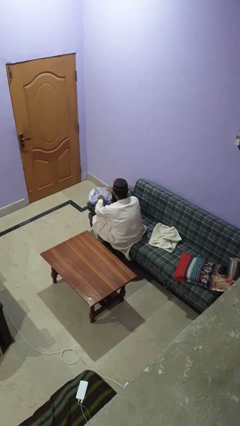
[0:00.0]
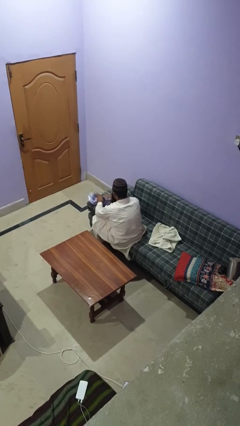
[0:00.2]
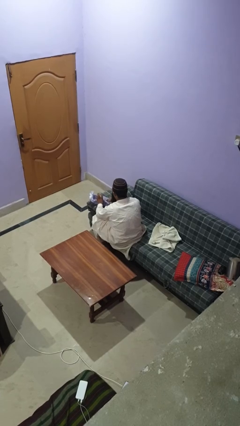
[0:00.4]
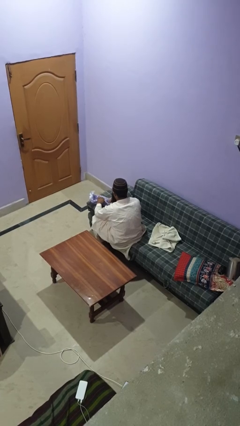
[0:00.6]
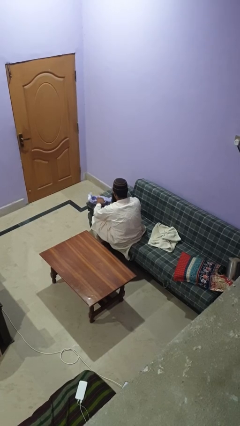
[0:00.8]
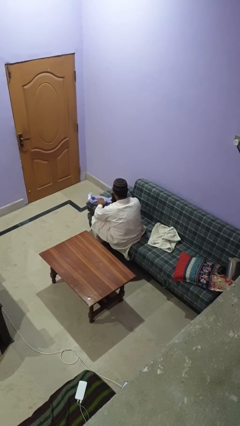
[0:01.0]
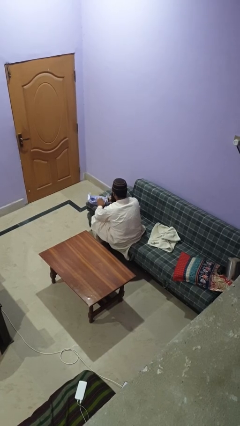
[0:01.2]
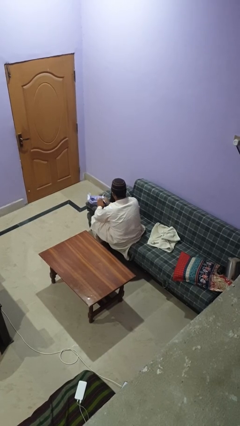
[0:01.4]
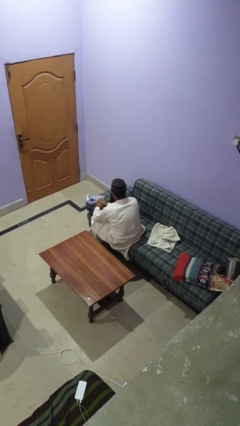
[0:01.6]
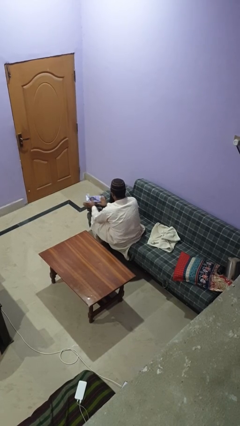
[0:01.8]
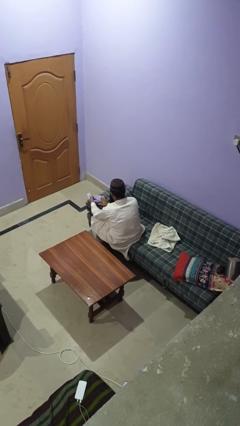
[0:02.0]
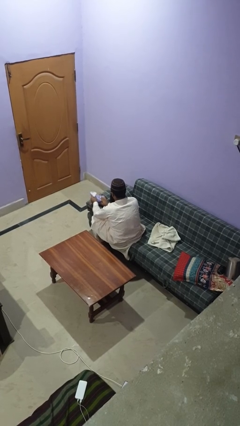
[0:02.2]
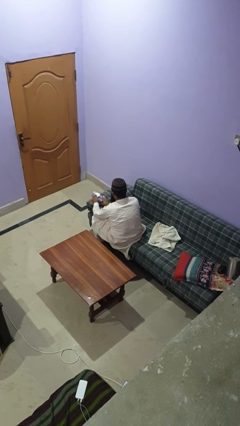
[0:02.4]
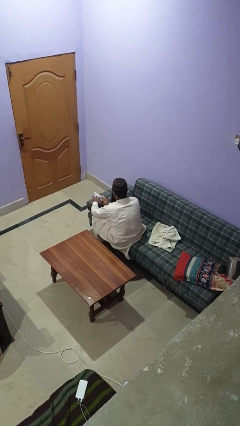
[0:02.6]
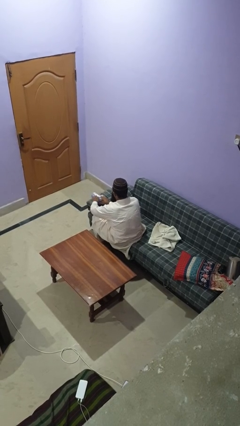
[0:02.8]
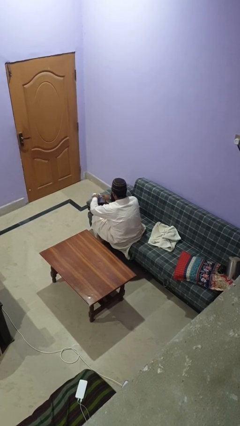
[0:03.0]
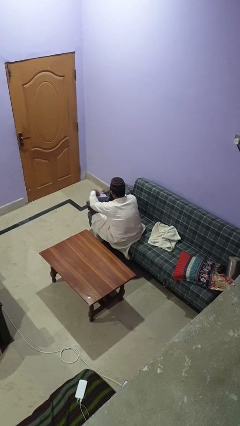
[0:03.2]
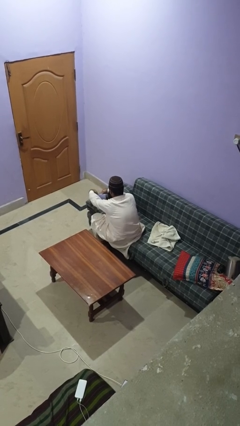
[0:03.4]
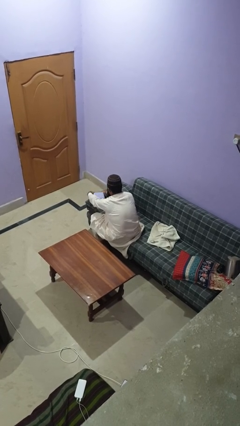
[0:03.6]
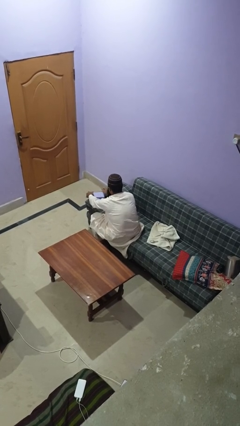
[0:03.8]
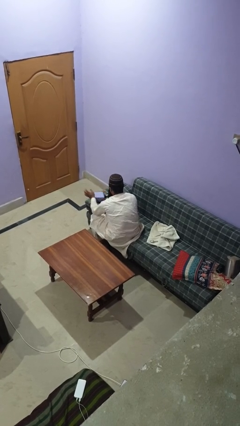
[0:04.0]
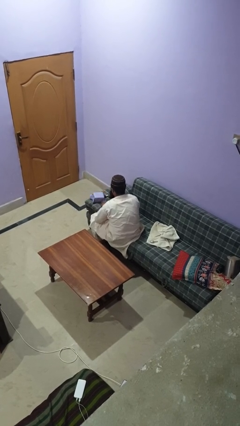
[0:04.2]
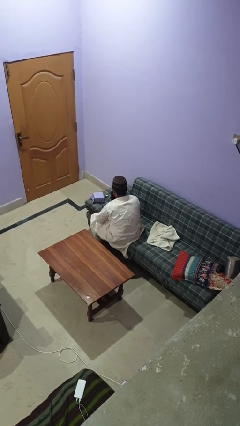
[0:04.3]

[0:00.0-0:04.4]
person wraps box

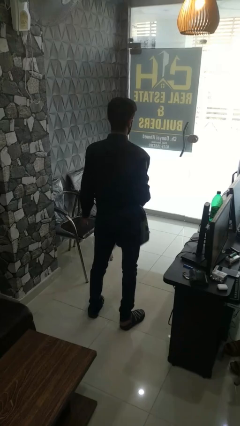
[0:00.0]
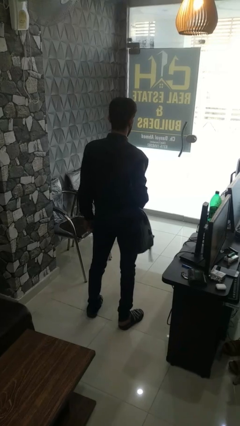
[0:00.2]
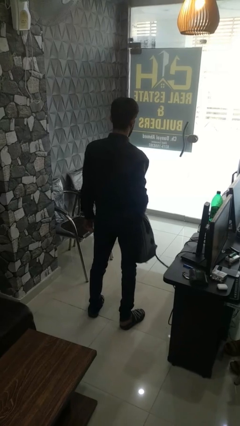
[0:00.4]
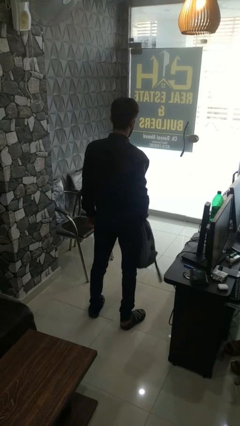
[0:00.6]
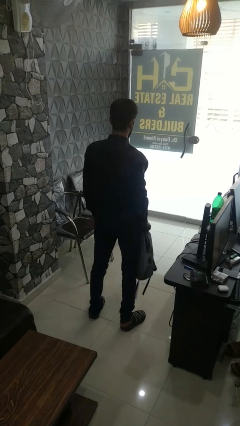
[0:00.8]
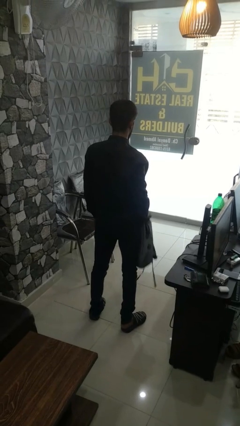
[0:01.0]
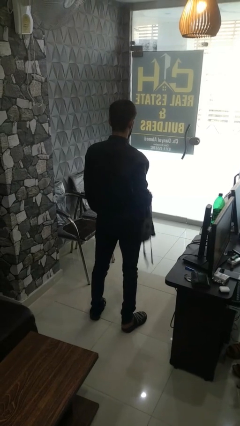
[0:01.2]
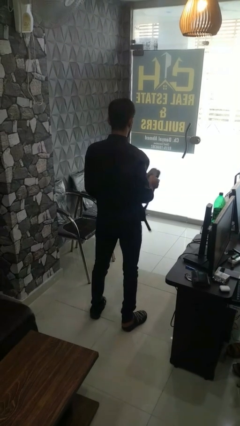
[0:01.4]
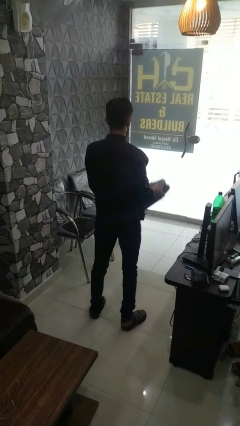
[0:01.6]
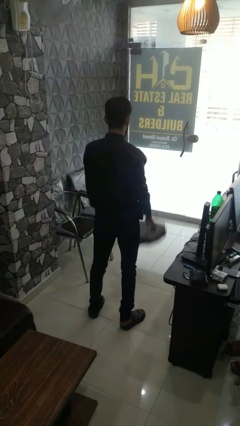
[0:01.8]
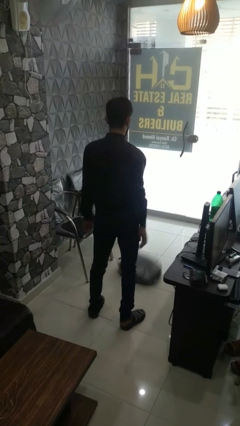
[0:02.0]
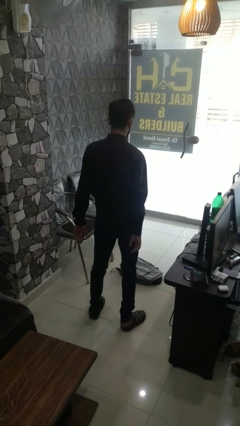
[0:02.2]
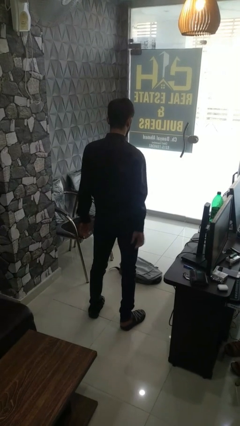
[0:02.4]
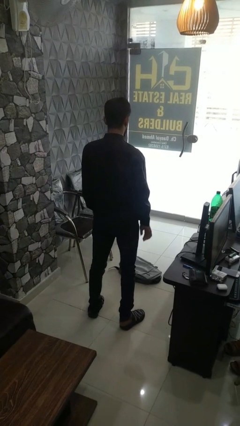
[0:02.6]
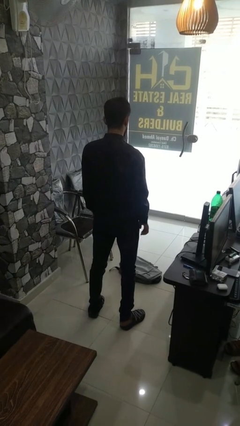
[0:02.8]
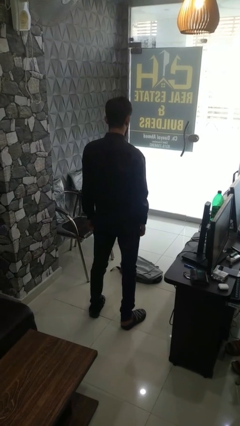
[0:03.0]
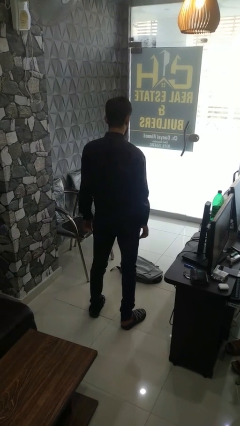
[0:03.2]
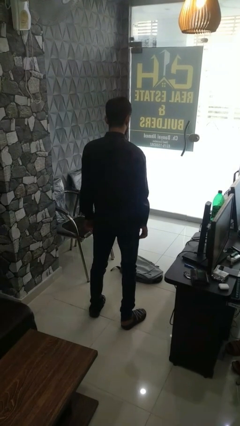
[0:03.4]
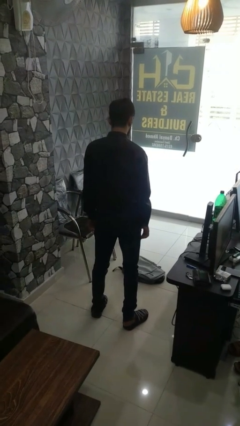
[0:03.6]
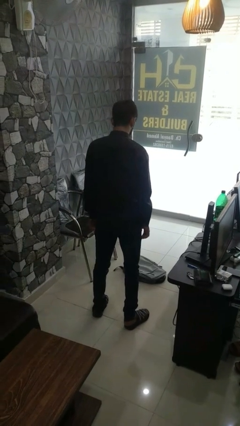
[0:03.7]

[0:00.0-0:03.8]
person throws object into air

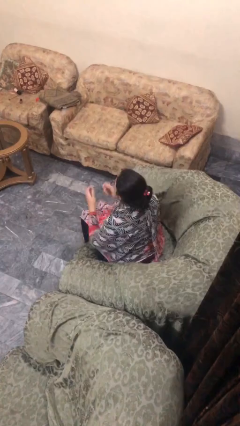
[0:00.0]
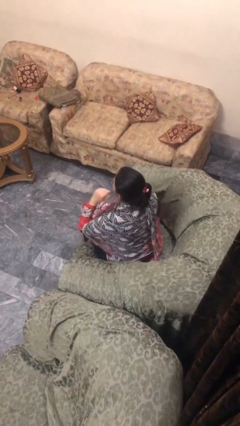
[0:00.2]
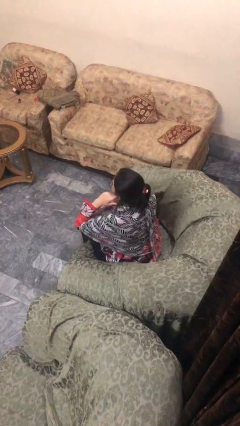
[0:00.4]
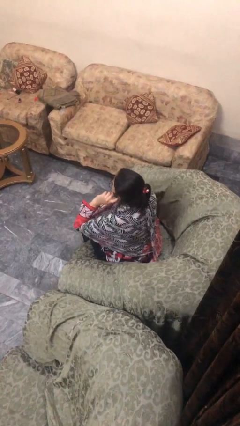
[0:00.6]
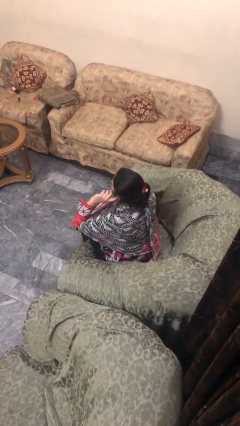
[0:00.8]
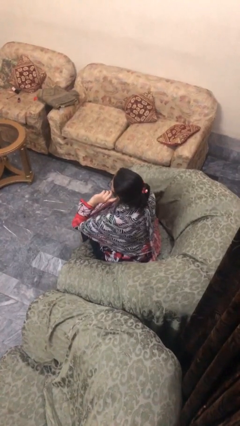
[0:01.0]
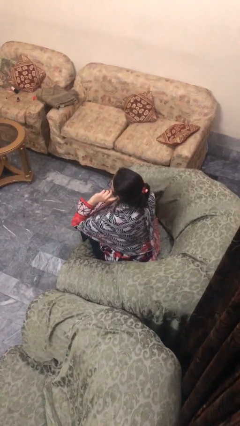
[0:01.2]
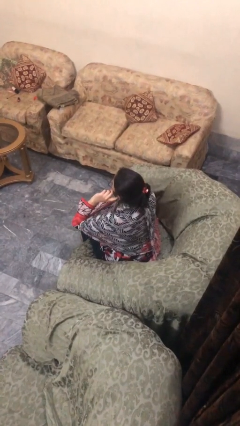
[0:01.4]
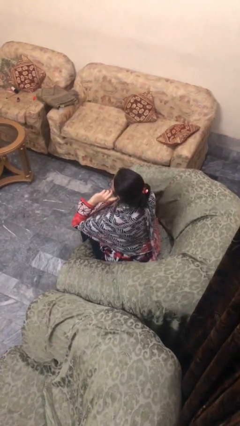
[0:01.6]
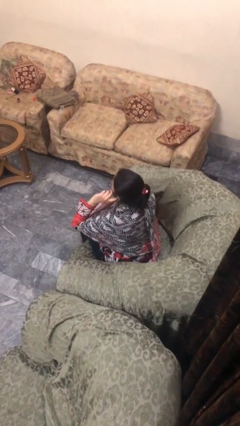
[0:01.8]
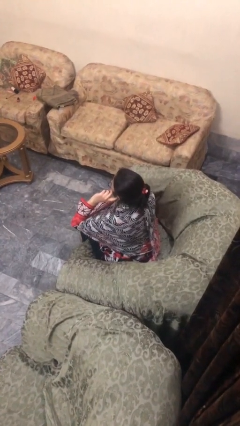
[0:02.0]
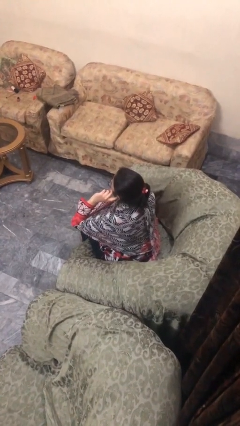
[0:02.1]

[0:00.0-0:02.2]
person puts fingers in ear

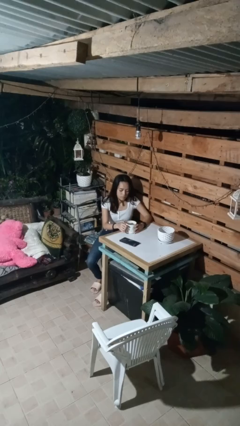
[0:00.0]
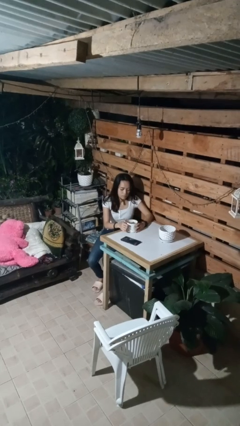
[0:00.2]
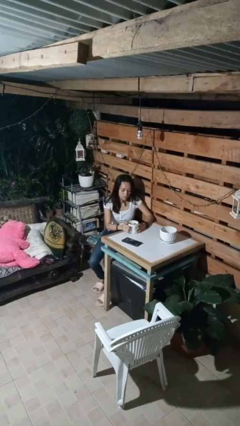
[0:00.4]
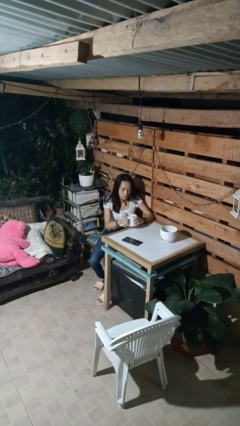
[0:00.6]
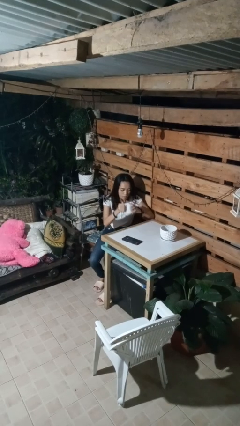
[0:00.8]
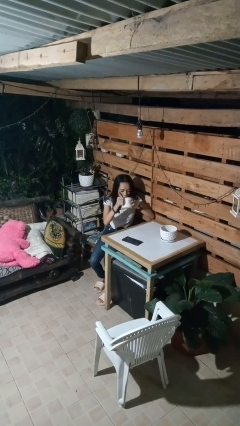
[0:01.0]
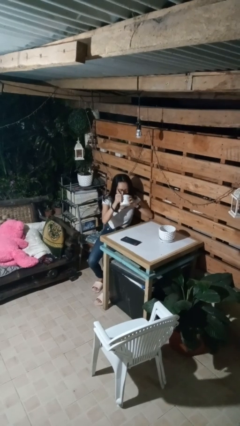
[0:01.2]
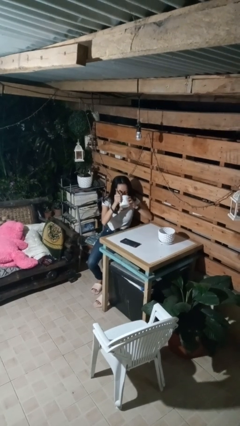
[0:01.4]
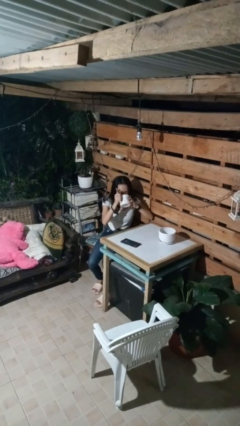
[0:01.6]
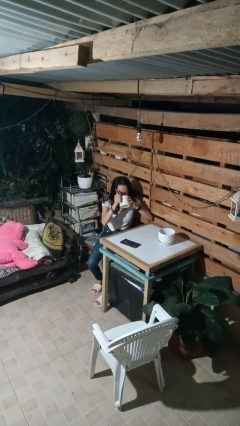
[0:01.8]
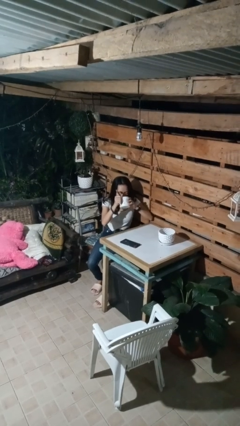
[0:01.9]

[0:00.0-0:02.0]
person drinks from mug

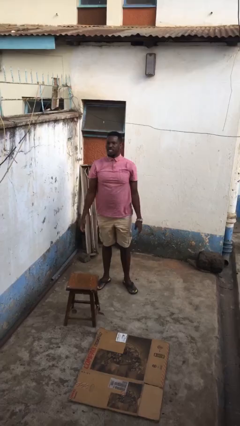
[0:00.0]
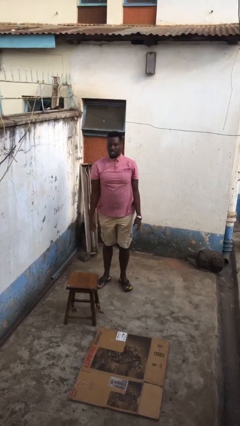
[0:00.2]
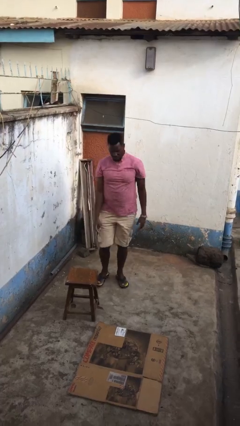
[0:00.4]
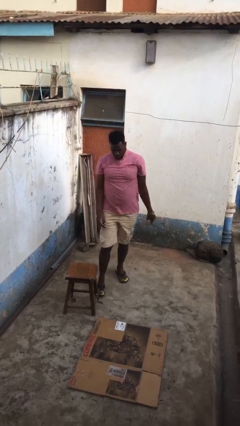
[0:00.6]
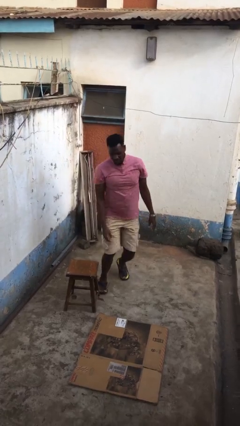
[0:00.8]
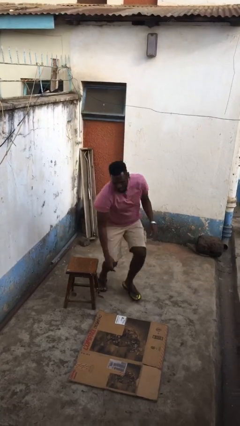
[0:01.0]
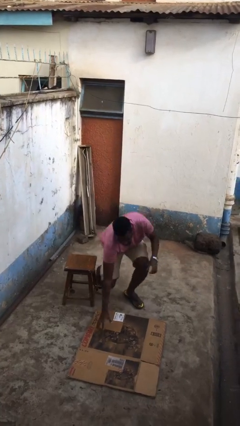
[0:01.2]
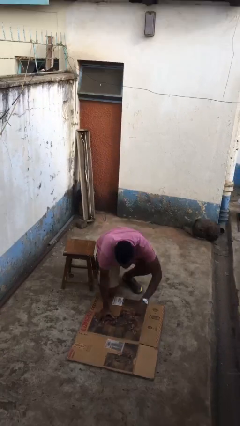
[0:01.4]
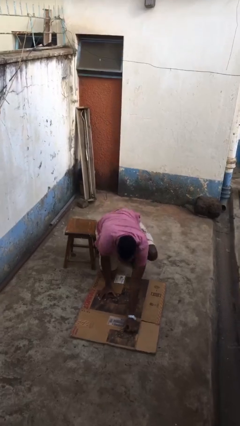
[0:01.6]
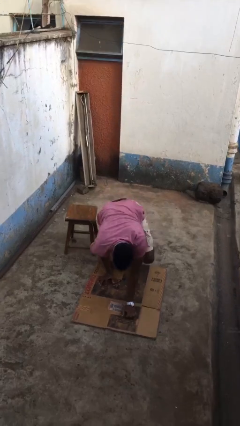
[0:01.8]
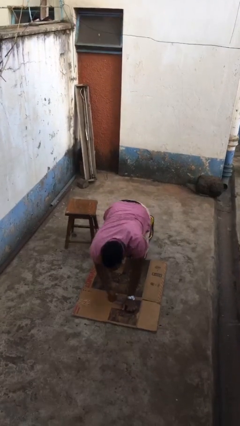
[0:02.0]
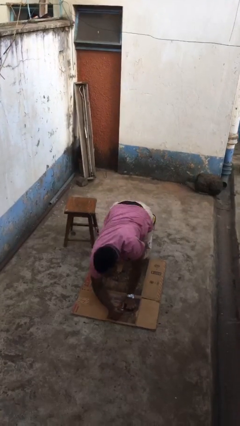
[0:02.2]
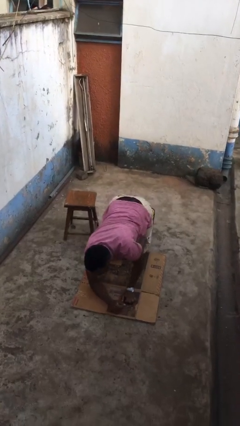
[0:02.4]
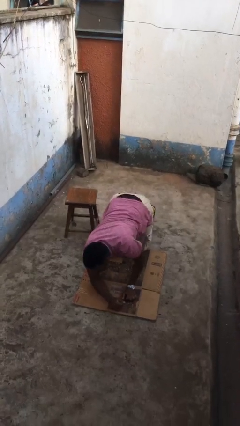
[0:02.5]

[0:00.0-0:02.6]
person trips on object on floor

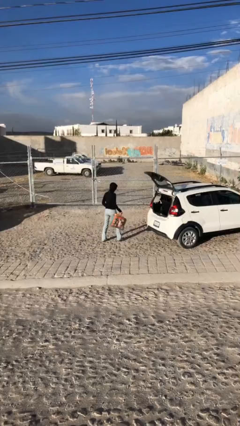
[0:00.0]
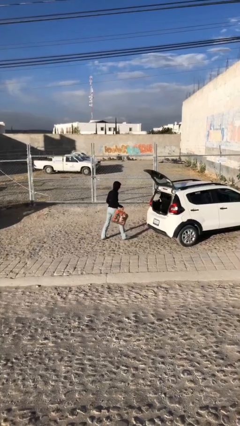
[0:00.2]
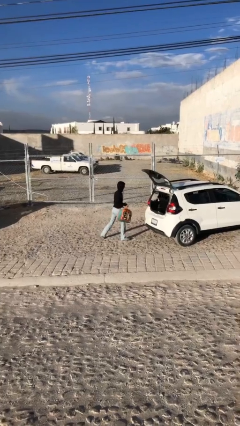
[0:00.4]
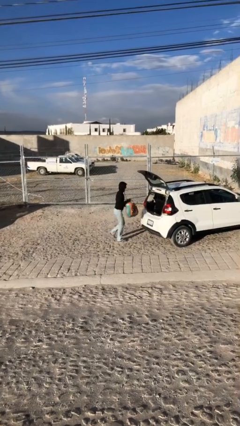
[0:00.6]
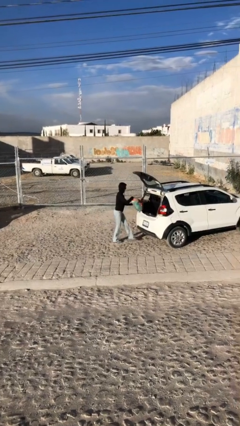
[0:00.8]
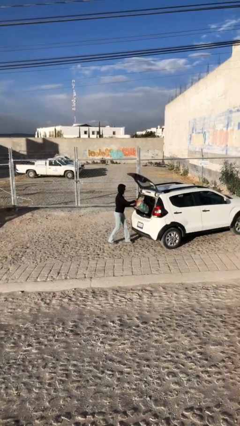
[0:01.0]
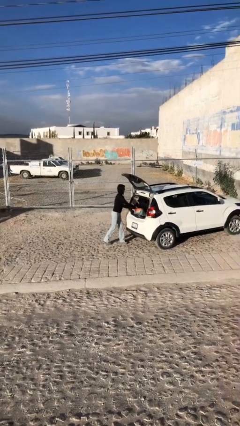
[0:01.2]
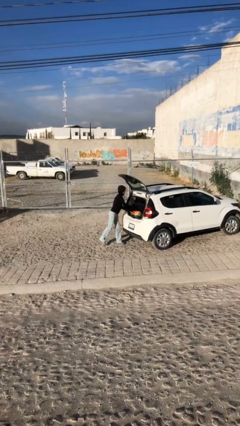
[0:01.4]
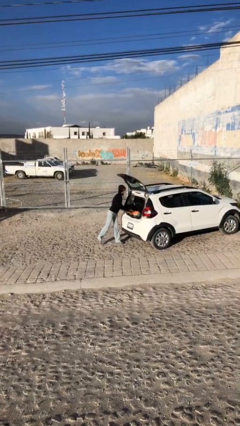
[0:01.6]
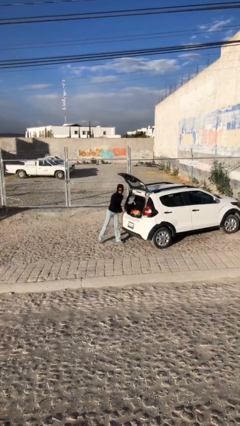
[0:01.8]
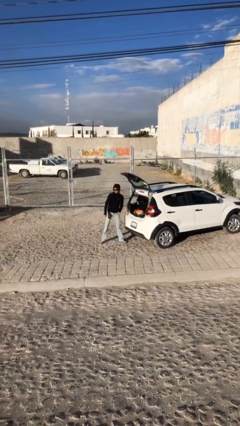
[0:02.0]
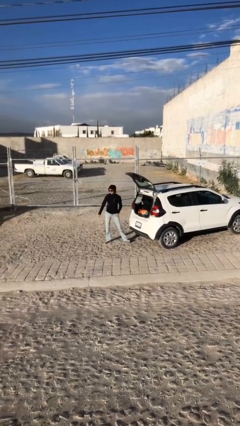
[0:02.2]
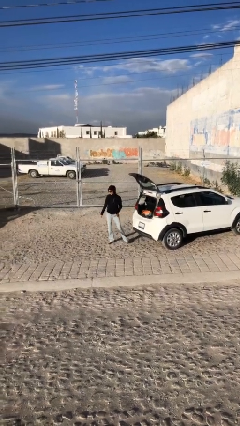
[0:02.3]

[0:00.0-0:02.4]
person loads car

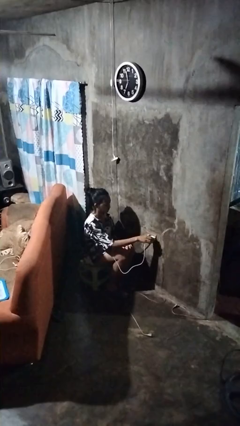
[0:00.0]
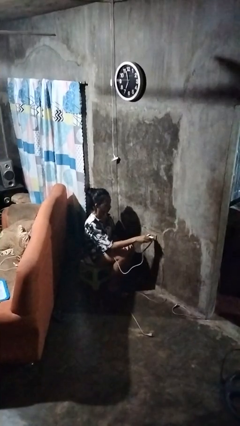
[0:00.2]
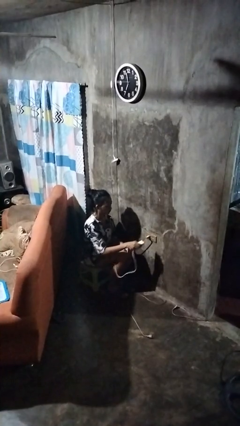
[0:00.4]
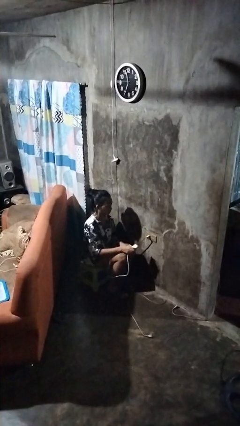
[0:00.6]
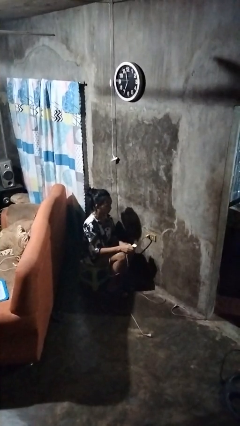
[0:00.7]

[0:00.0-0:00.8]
person unplugs from electrical socket
